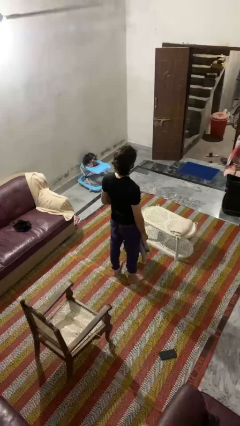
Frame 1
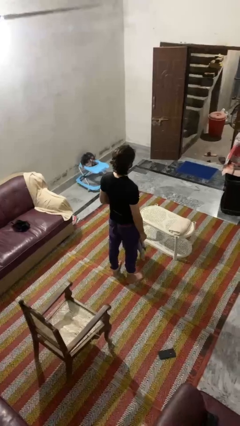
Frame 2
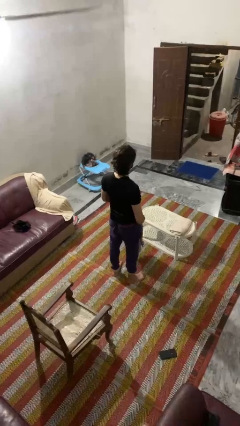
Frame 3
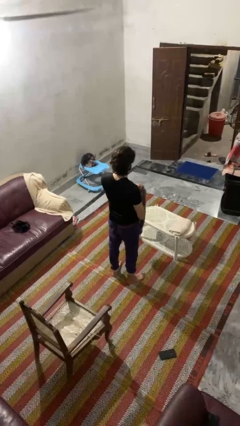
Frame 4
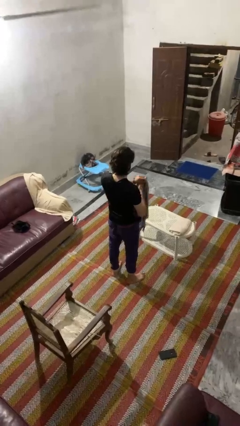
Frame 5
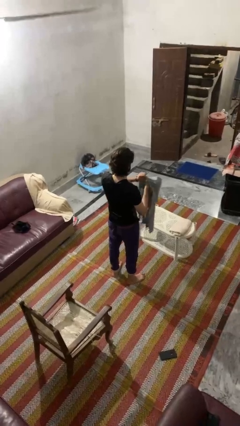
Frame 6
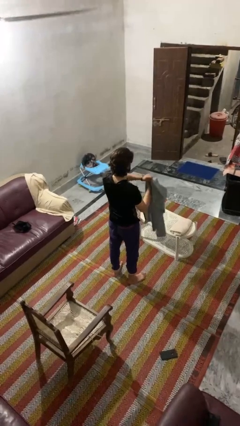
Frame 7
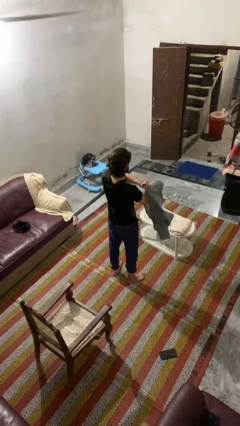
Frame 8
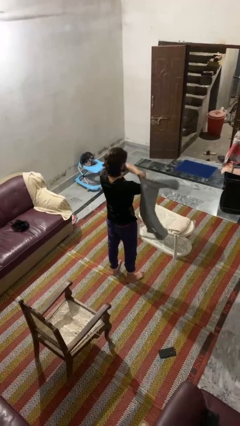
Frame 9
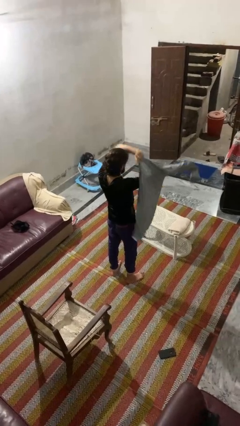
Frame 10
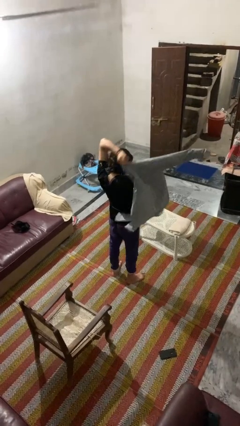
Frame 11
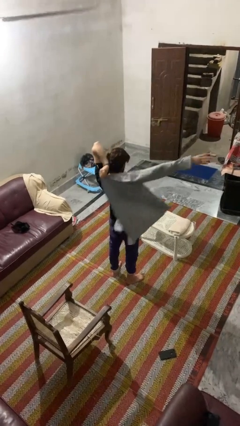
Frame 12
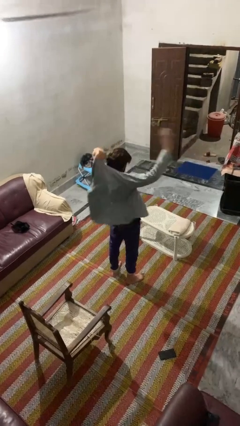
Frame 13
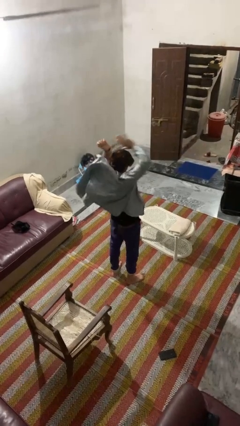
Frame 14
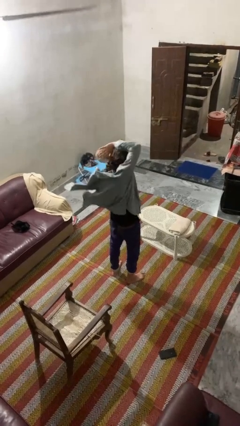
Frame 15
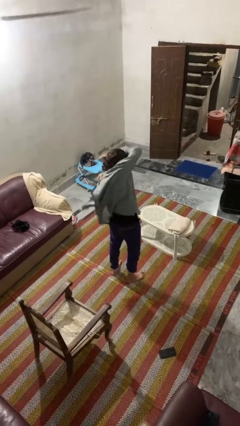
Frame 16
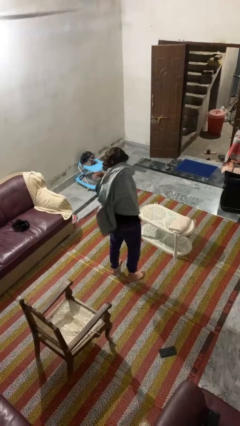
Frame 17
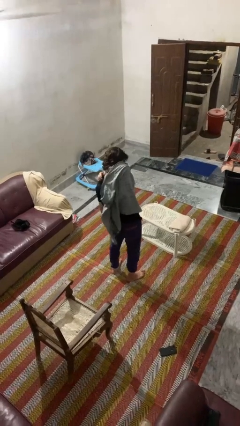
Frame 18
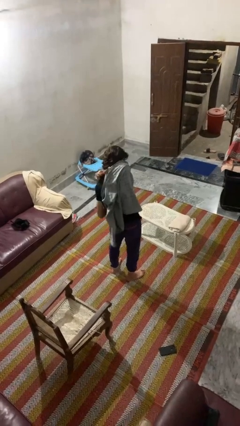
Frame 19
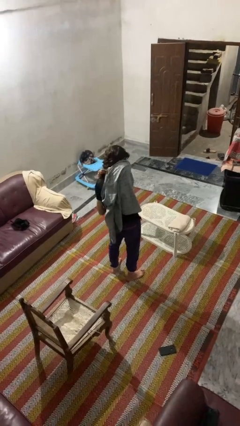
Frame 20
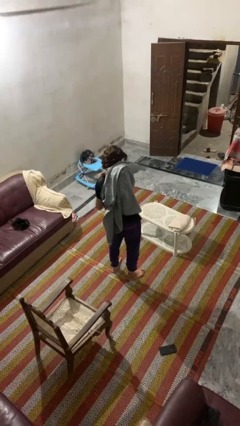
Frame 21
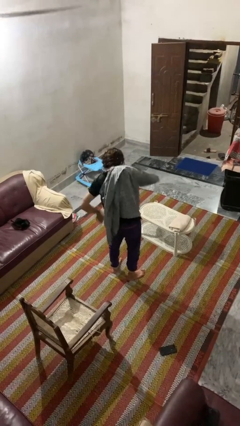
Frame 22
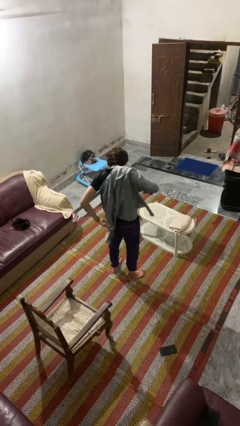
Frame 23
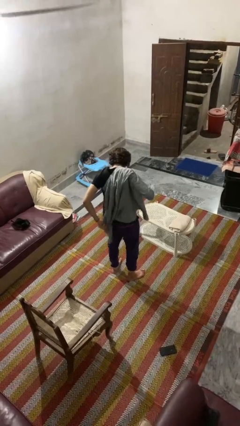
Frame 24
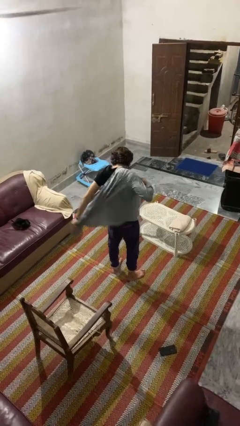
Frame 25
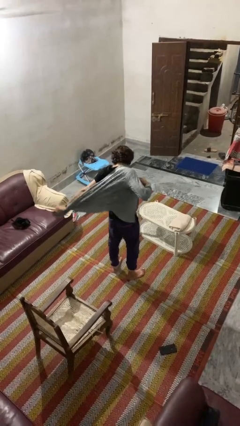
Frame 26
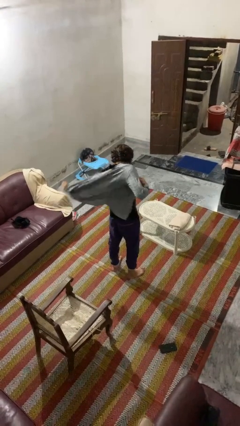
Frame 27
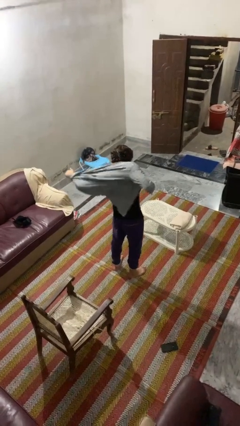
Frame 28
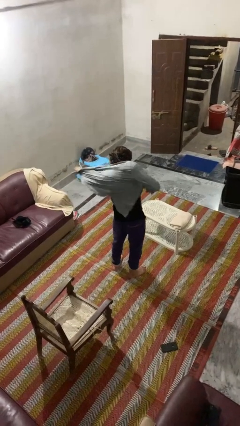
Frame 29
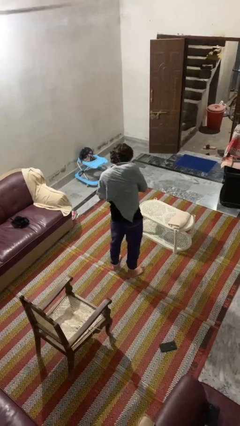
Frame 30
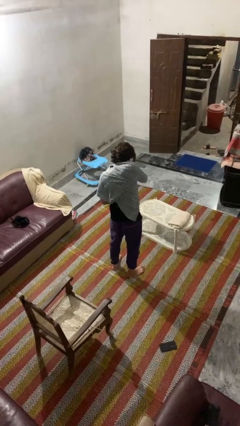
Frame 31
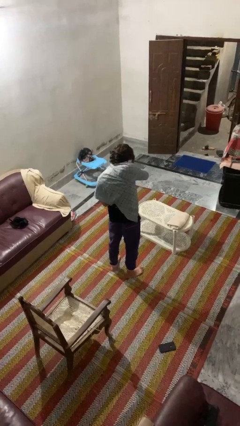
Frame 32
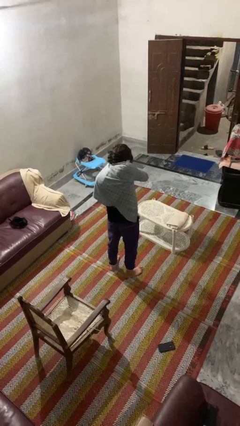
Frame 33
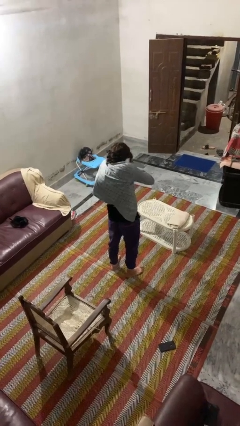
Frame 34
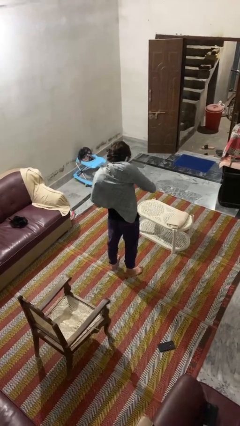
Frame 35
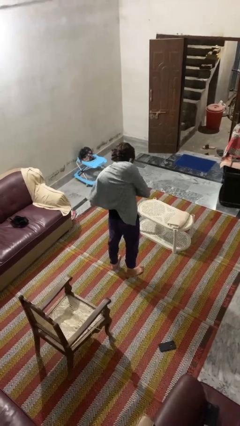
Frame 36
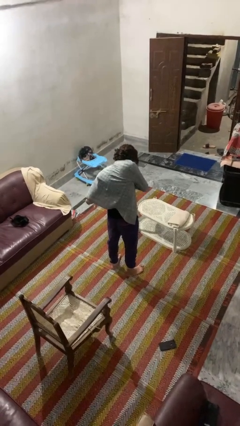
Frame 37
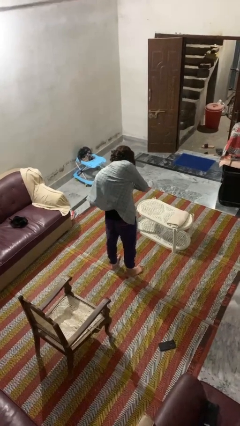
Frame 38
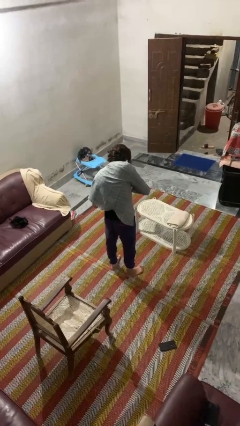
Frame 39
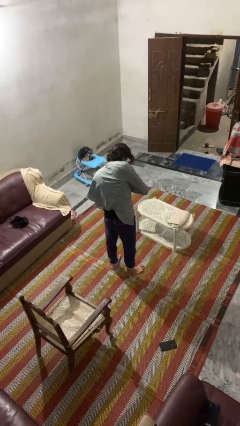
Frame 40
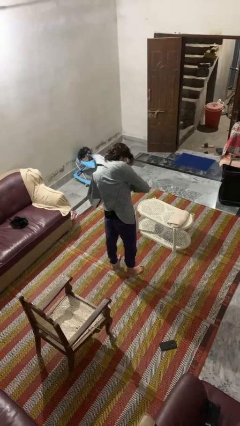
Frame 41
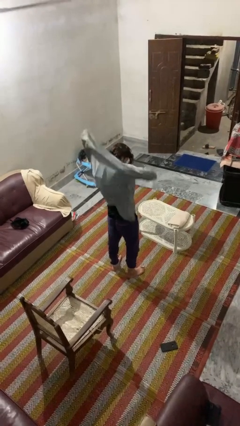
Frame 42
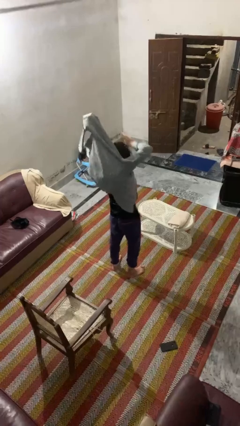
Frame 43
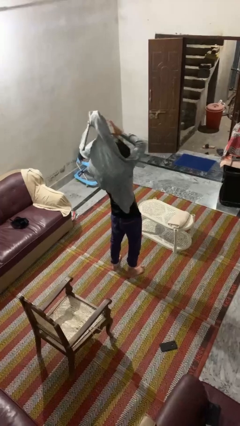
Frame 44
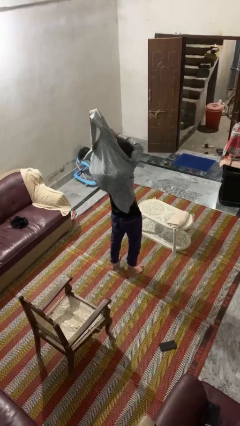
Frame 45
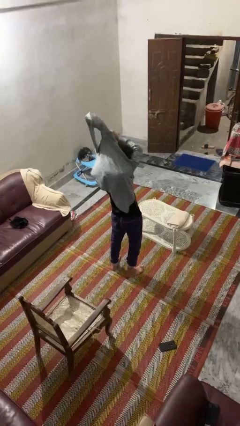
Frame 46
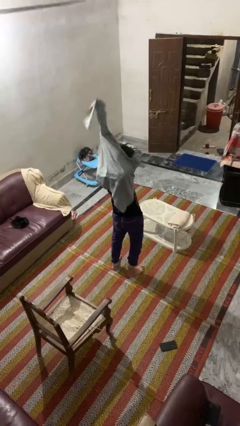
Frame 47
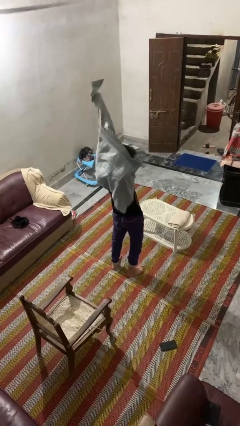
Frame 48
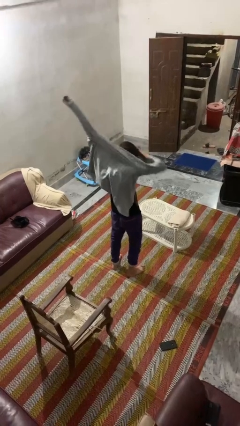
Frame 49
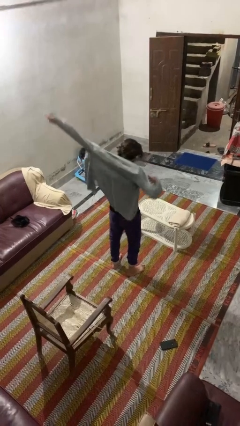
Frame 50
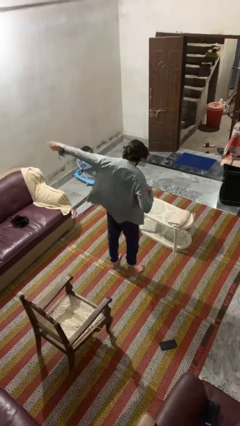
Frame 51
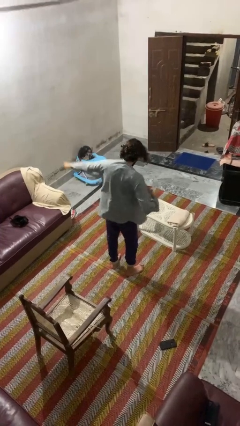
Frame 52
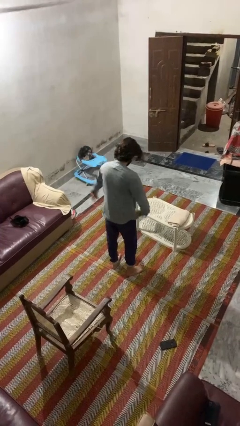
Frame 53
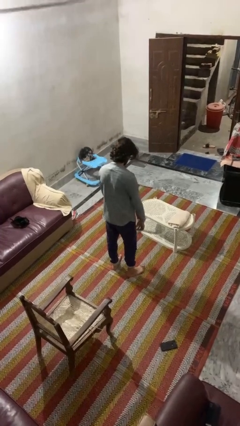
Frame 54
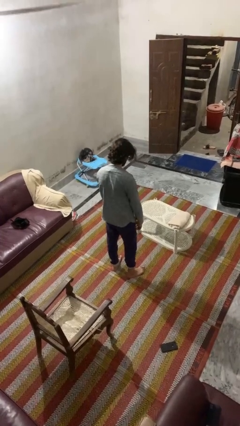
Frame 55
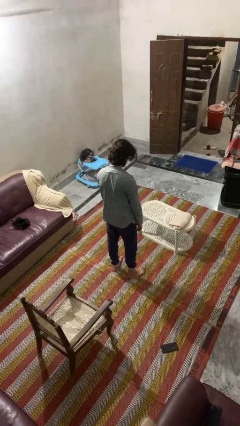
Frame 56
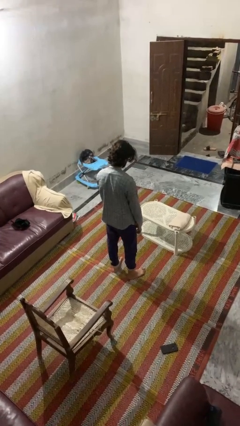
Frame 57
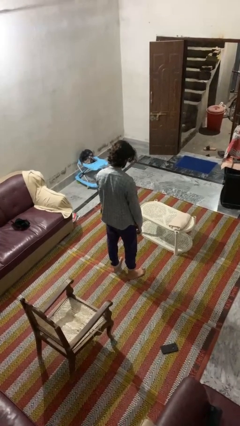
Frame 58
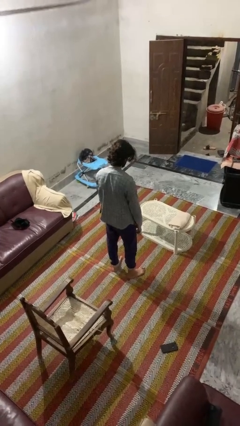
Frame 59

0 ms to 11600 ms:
person puts on shirt

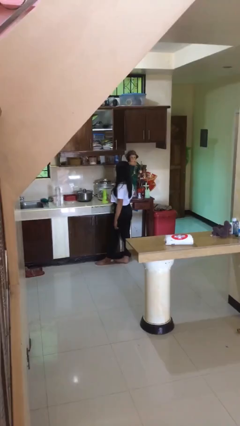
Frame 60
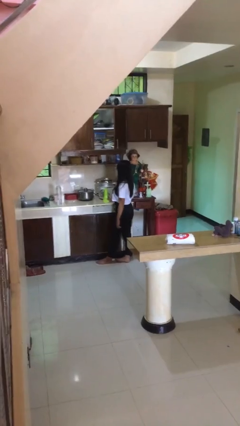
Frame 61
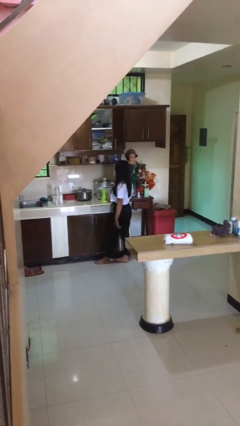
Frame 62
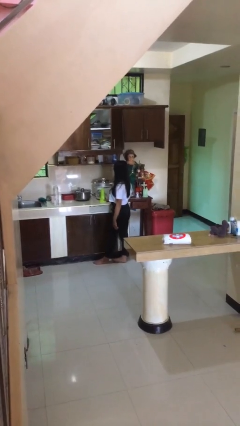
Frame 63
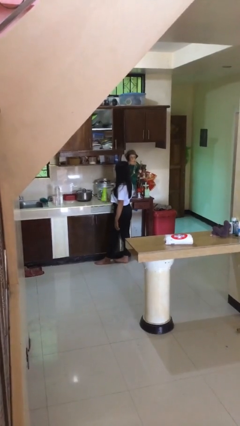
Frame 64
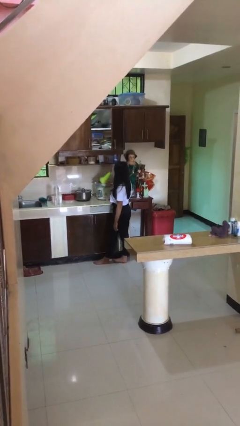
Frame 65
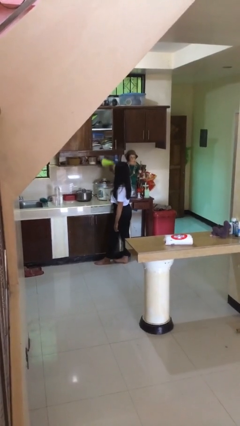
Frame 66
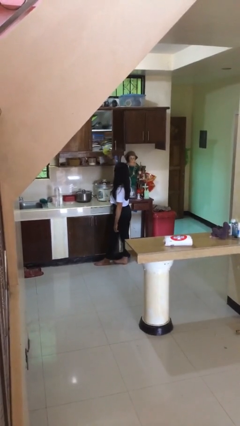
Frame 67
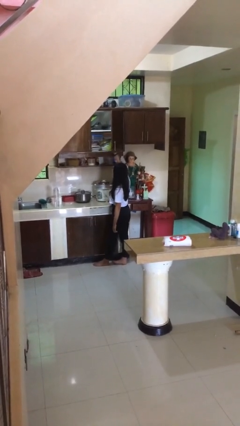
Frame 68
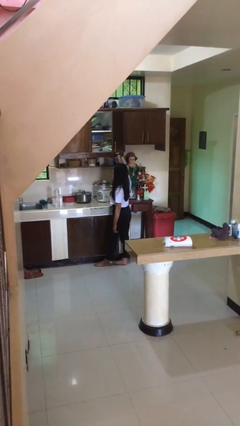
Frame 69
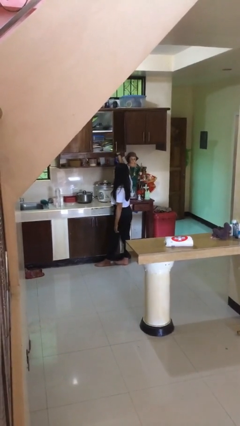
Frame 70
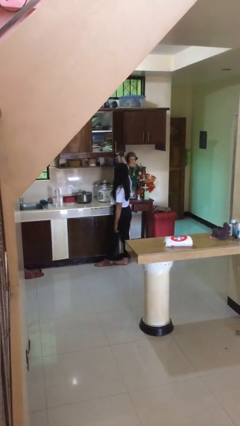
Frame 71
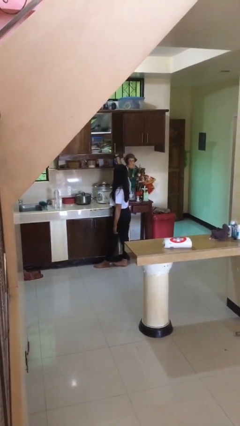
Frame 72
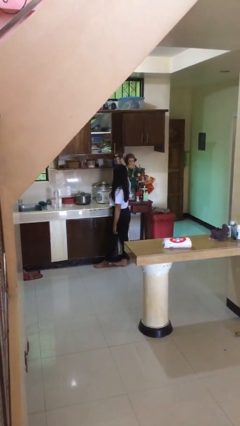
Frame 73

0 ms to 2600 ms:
person puts down object into cabinet

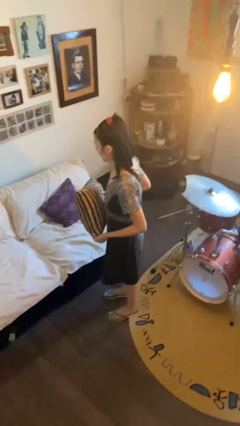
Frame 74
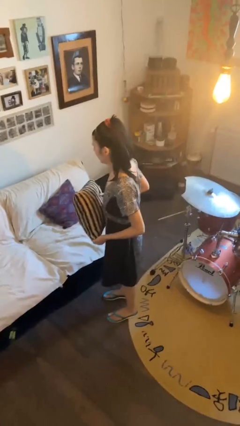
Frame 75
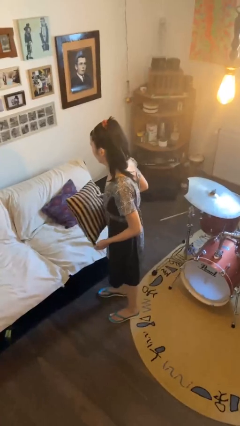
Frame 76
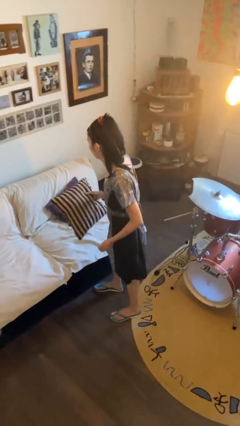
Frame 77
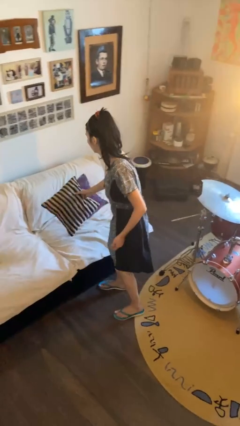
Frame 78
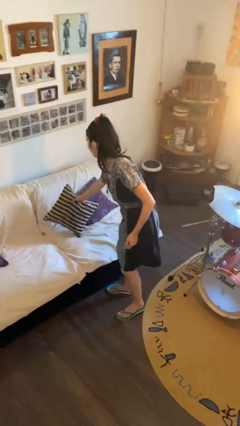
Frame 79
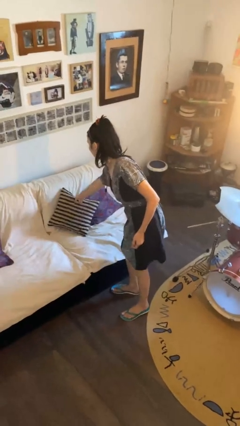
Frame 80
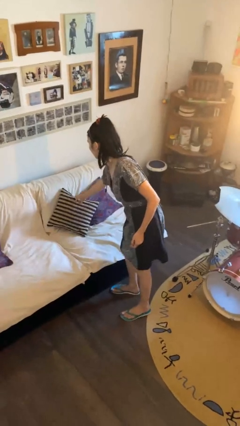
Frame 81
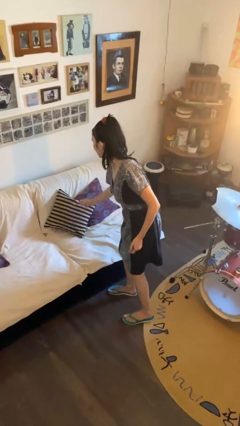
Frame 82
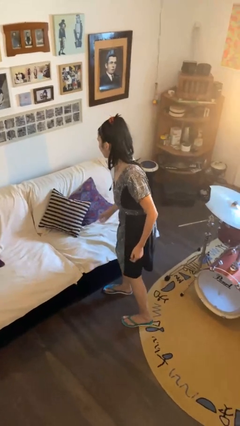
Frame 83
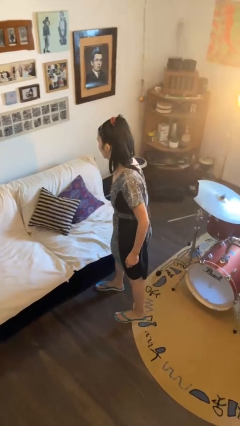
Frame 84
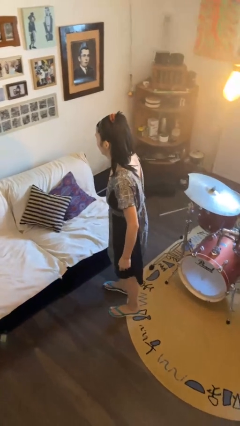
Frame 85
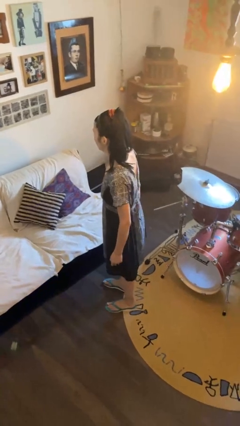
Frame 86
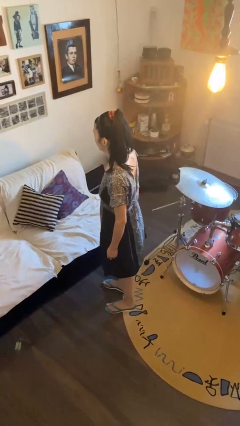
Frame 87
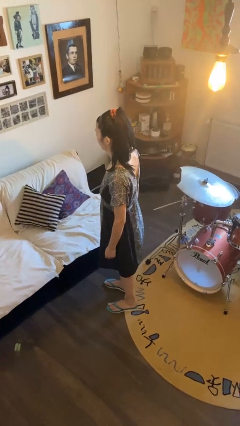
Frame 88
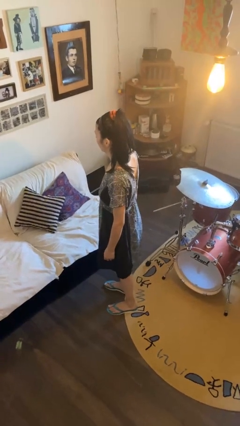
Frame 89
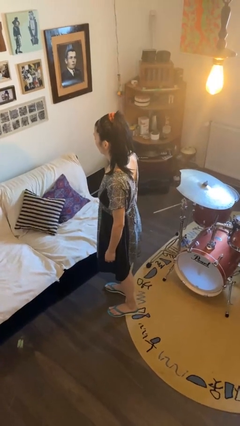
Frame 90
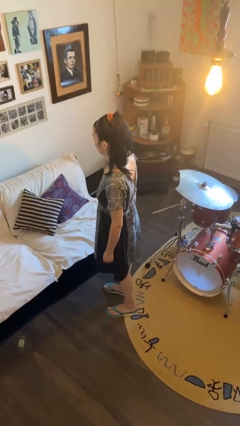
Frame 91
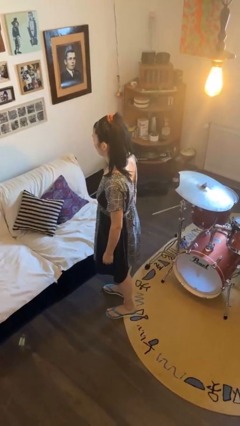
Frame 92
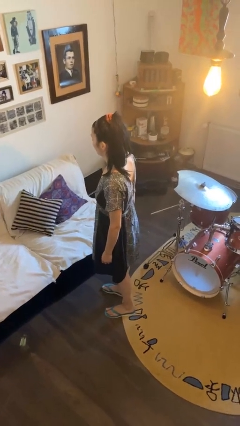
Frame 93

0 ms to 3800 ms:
person puts down object on couch
